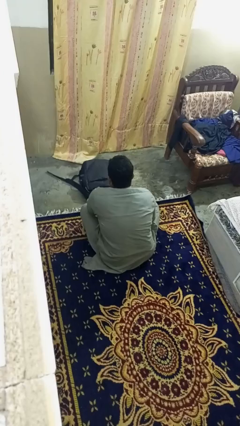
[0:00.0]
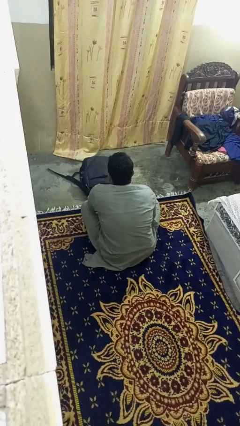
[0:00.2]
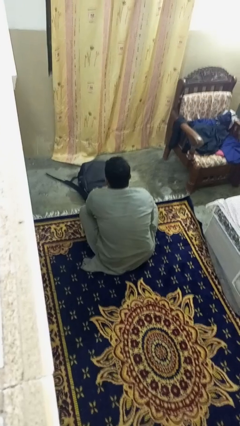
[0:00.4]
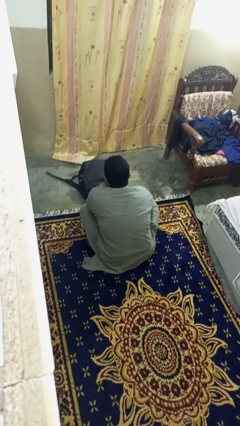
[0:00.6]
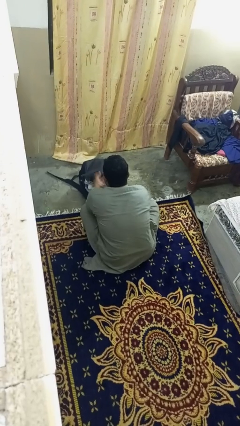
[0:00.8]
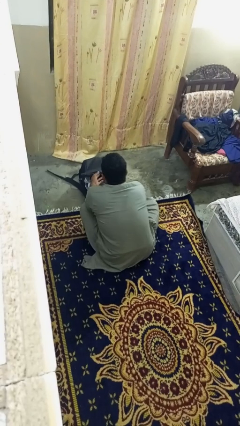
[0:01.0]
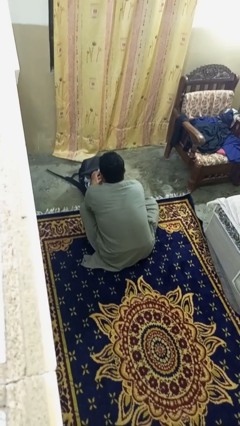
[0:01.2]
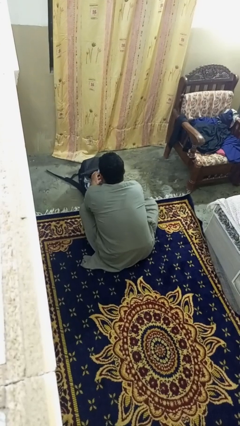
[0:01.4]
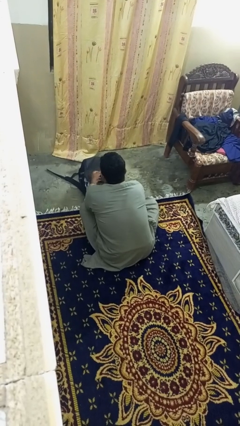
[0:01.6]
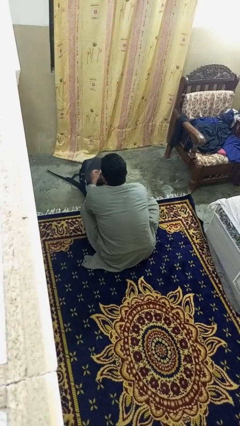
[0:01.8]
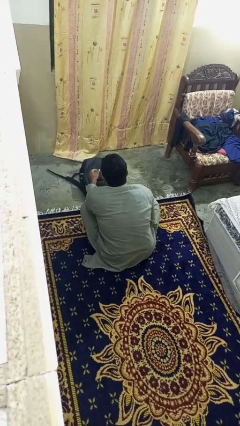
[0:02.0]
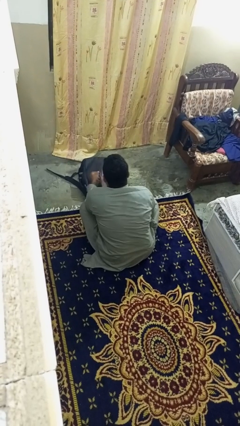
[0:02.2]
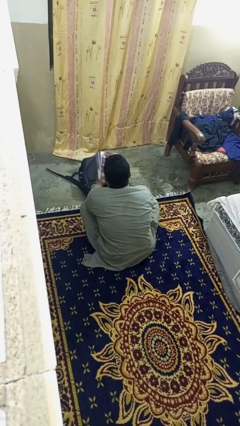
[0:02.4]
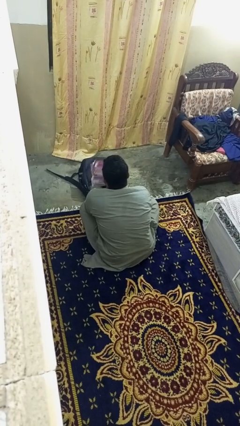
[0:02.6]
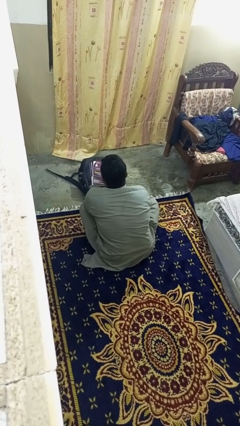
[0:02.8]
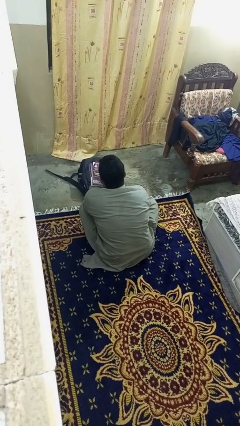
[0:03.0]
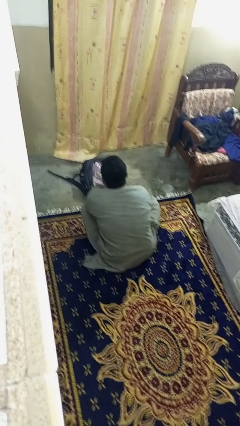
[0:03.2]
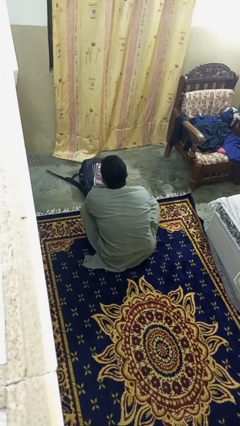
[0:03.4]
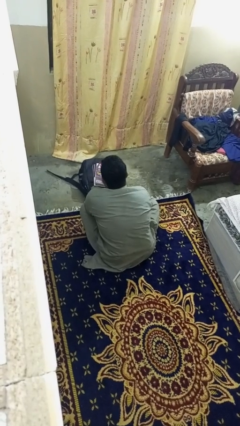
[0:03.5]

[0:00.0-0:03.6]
person takes object from bag

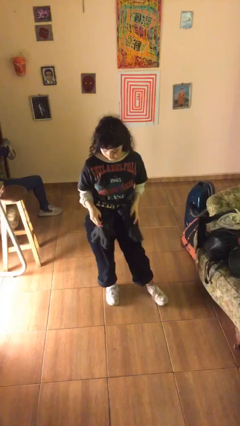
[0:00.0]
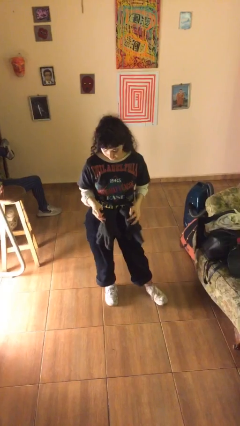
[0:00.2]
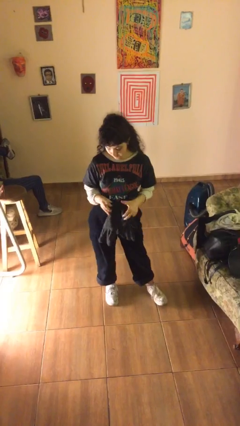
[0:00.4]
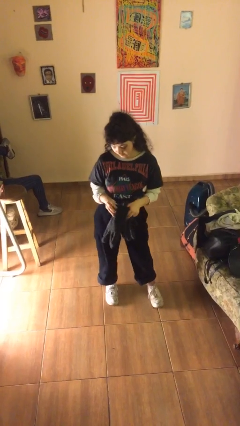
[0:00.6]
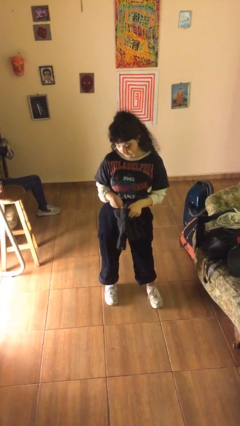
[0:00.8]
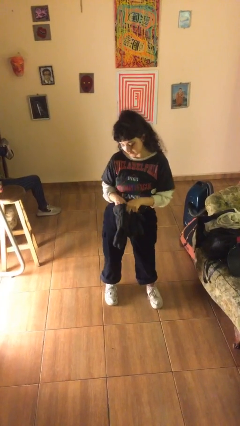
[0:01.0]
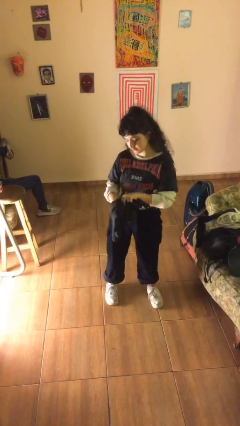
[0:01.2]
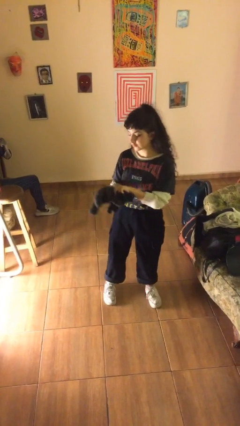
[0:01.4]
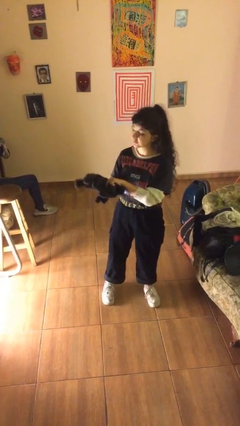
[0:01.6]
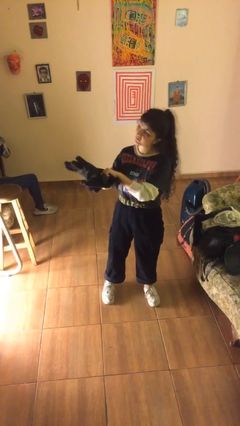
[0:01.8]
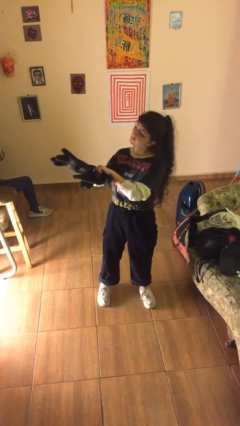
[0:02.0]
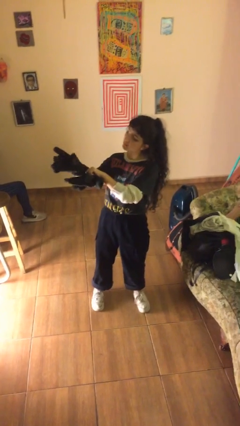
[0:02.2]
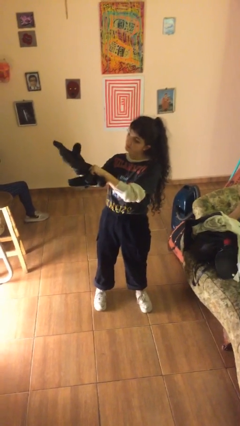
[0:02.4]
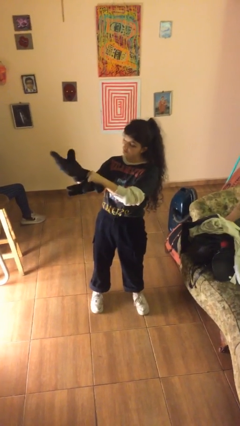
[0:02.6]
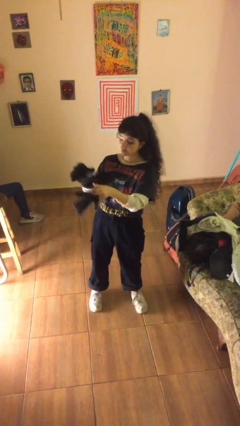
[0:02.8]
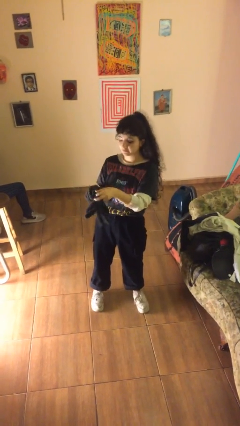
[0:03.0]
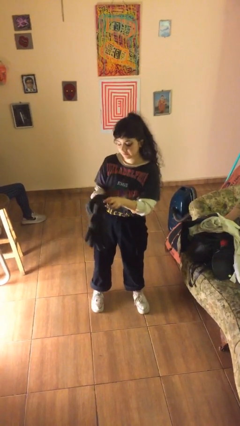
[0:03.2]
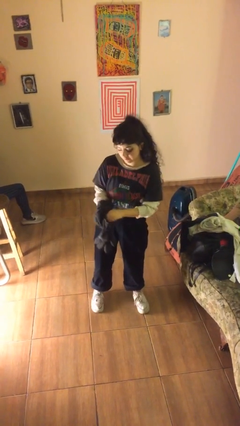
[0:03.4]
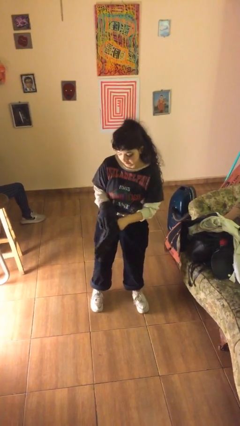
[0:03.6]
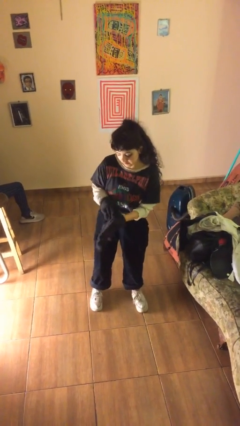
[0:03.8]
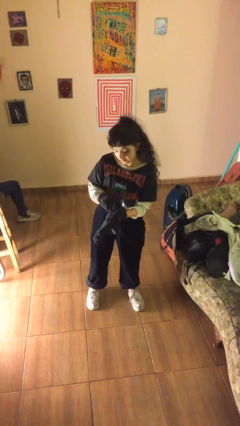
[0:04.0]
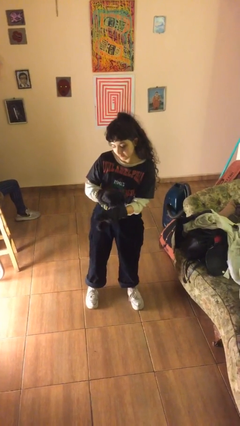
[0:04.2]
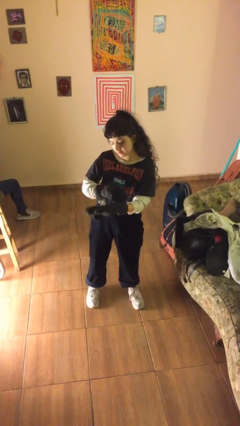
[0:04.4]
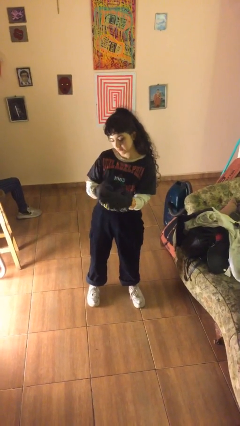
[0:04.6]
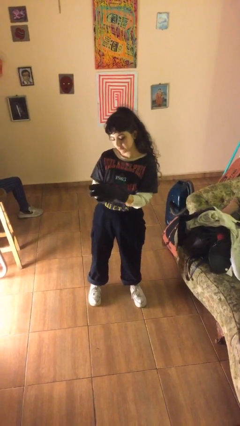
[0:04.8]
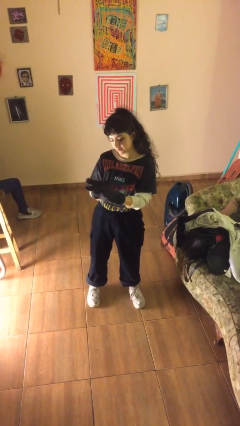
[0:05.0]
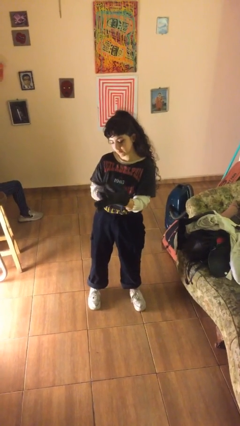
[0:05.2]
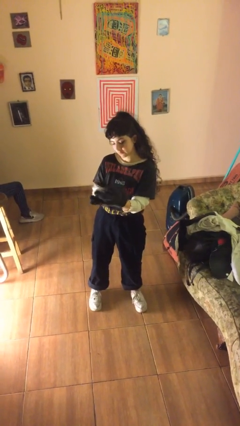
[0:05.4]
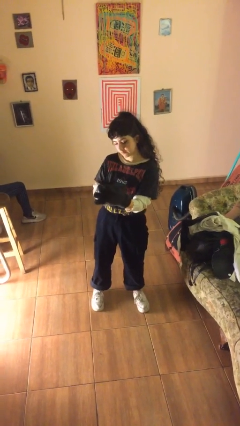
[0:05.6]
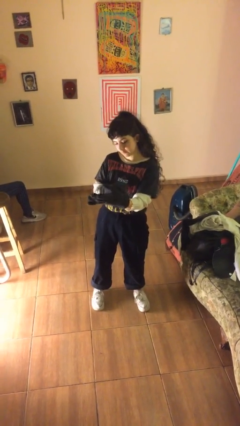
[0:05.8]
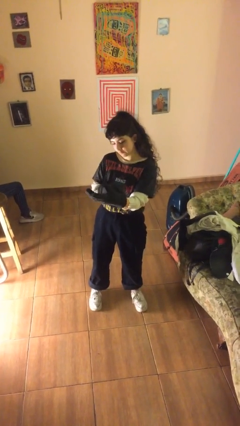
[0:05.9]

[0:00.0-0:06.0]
person puts on gloves

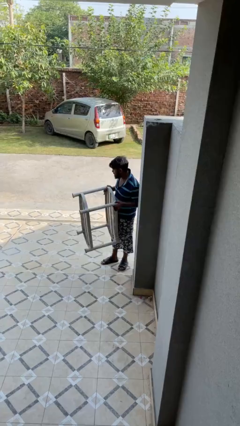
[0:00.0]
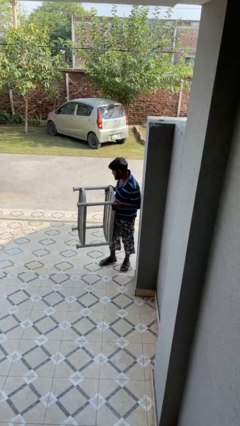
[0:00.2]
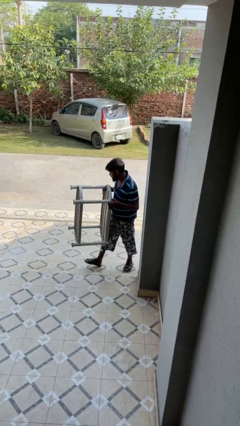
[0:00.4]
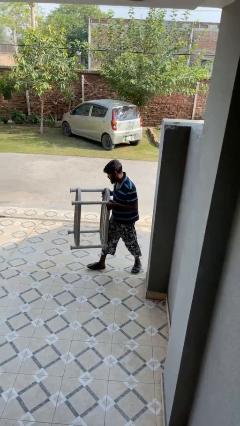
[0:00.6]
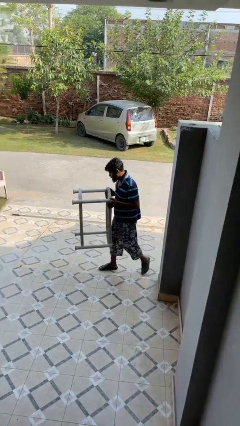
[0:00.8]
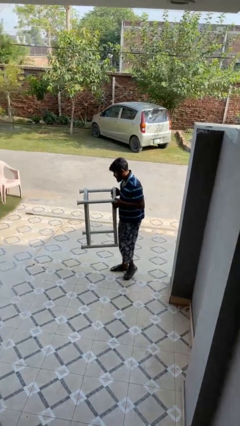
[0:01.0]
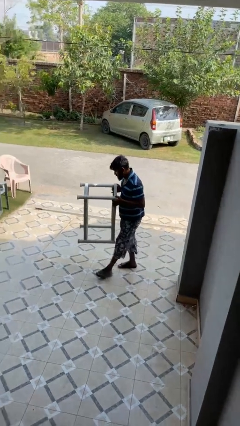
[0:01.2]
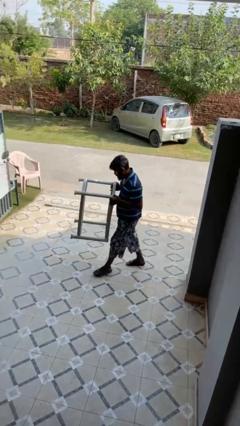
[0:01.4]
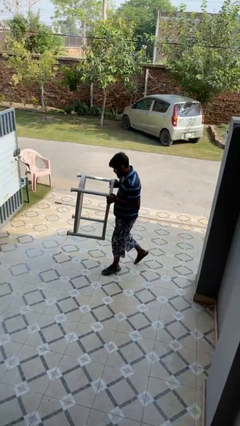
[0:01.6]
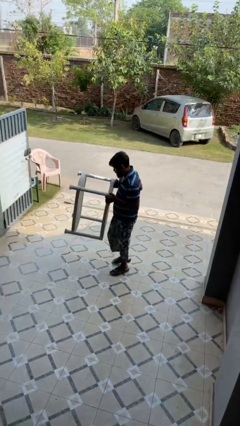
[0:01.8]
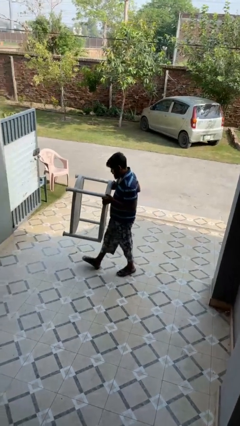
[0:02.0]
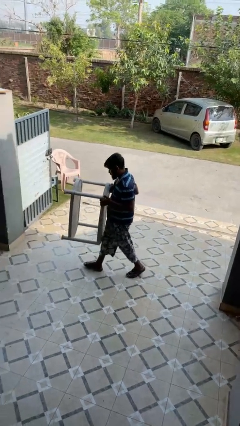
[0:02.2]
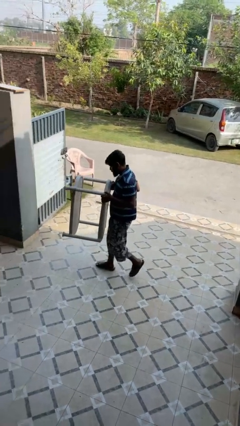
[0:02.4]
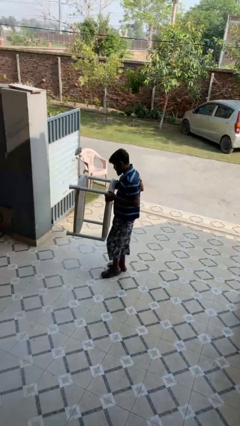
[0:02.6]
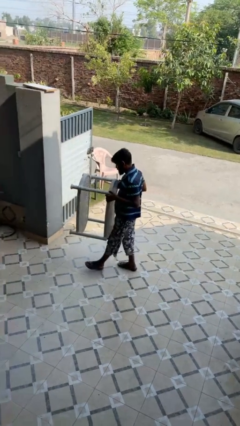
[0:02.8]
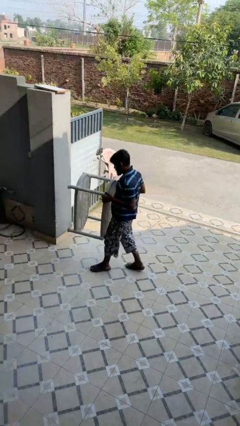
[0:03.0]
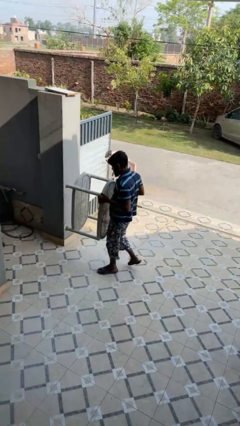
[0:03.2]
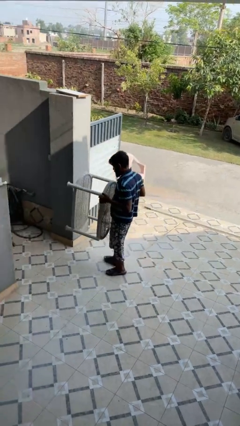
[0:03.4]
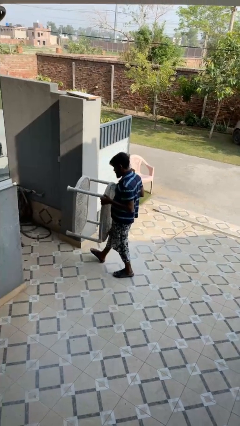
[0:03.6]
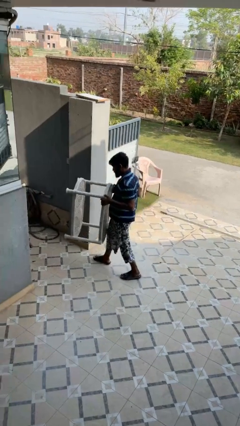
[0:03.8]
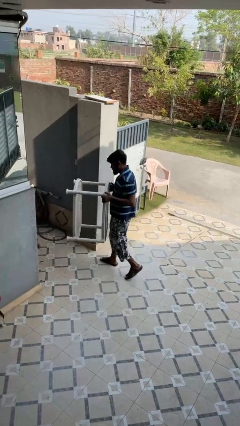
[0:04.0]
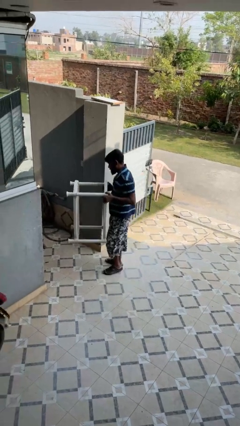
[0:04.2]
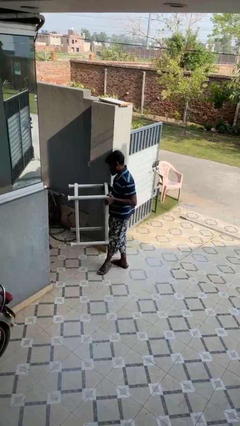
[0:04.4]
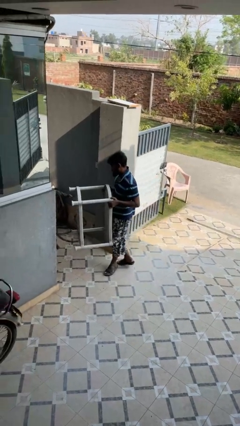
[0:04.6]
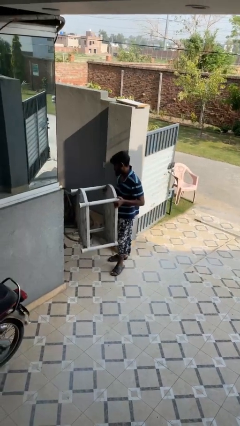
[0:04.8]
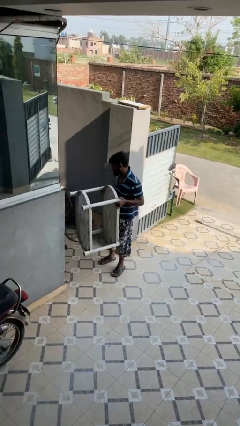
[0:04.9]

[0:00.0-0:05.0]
person carries furniture

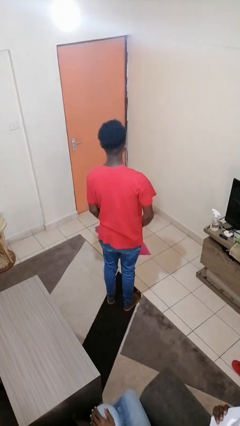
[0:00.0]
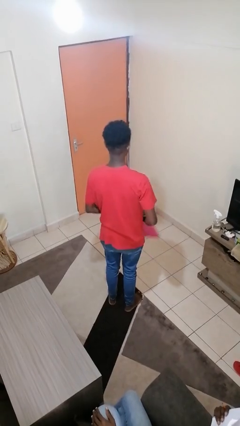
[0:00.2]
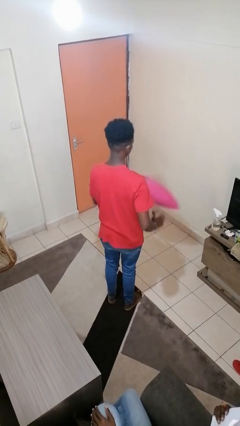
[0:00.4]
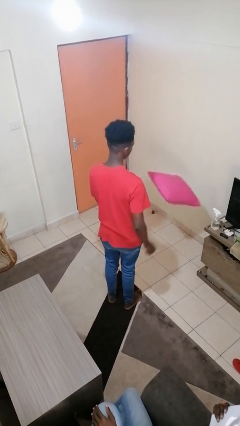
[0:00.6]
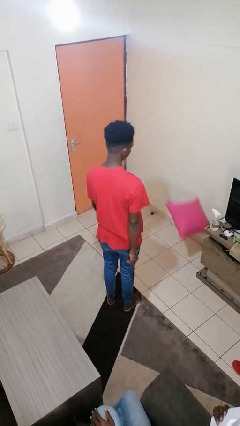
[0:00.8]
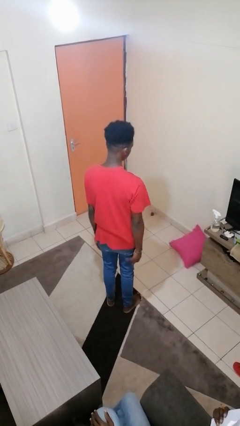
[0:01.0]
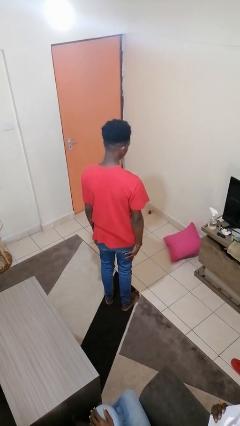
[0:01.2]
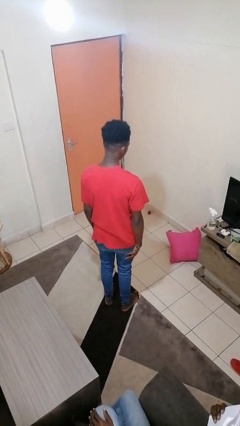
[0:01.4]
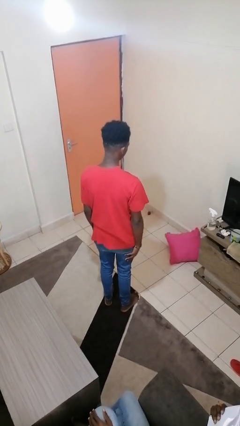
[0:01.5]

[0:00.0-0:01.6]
person throws object to ground

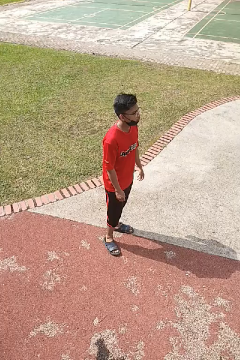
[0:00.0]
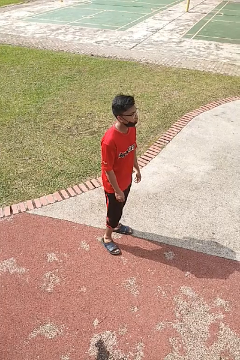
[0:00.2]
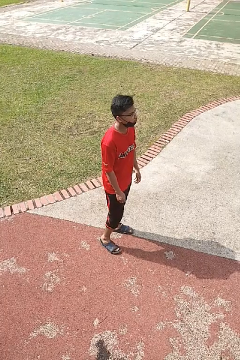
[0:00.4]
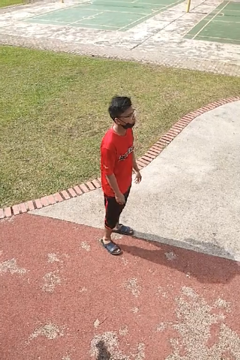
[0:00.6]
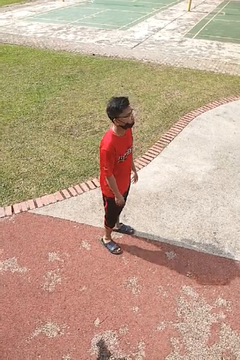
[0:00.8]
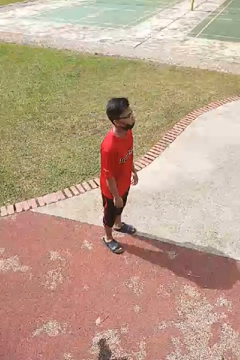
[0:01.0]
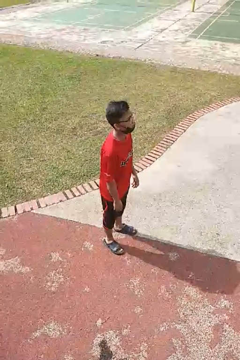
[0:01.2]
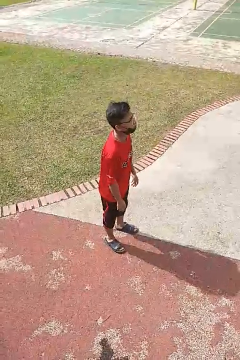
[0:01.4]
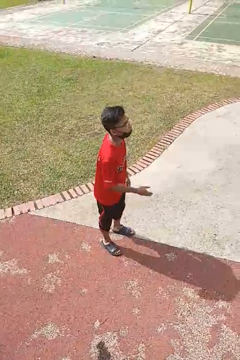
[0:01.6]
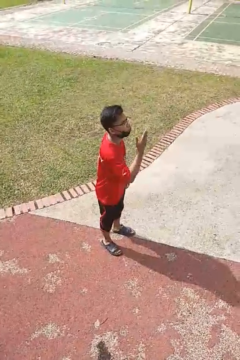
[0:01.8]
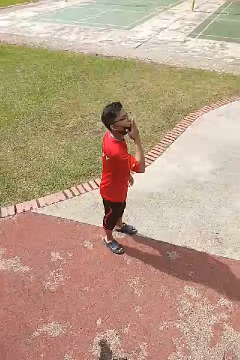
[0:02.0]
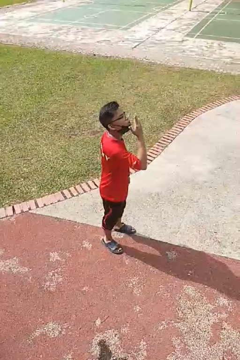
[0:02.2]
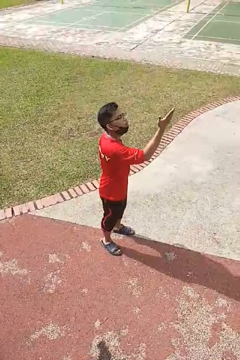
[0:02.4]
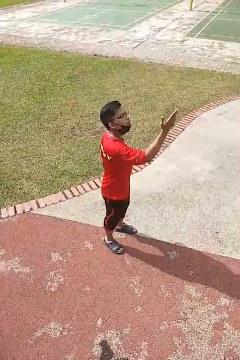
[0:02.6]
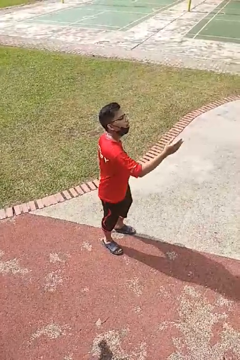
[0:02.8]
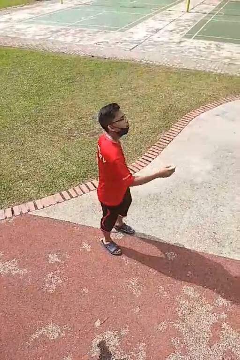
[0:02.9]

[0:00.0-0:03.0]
person gestures blow kiss
